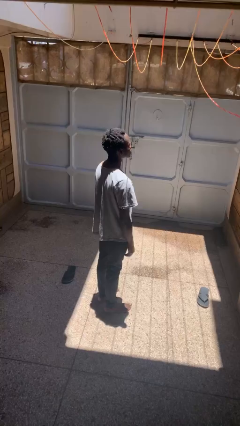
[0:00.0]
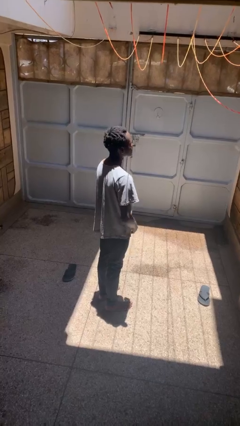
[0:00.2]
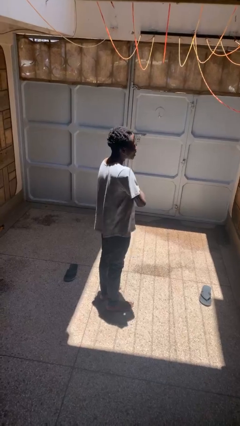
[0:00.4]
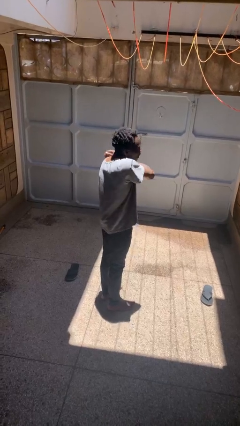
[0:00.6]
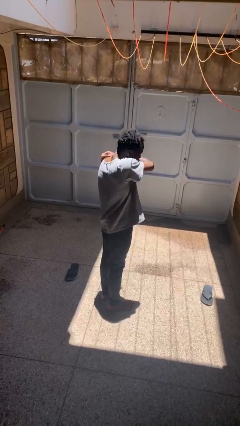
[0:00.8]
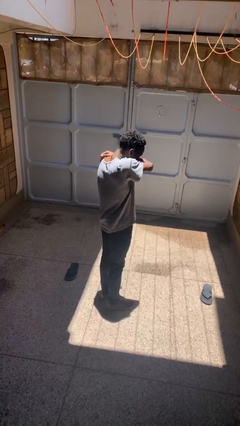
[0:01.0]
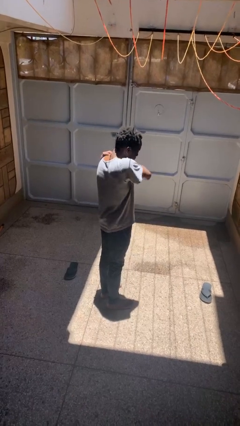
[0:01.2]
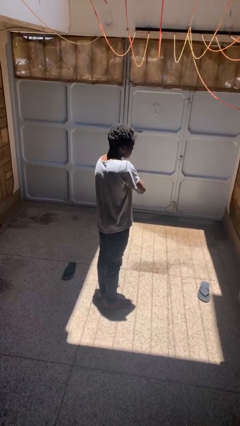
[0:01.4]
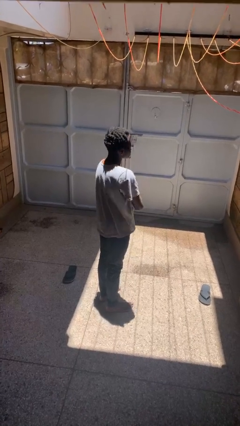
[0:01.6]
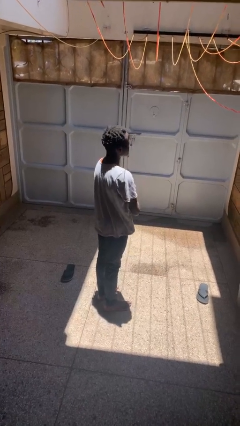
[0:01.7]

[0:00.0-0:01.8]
person sneezes into arm

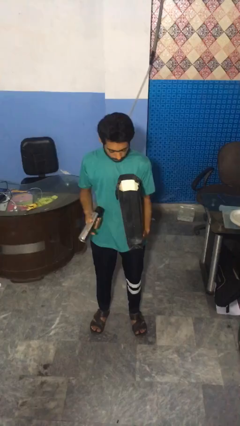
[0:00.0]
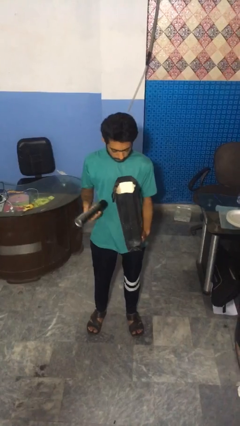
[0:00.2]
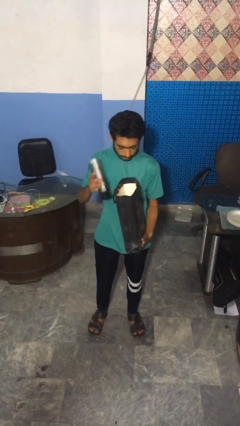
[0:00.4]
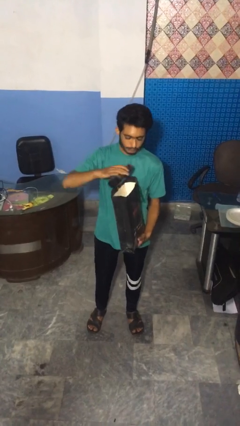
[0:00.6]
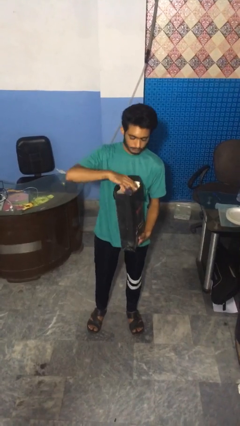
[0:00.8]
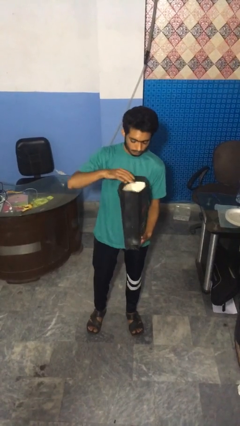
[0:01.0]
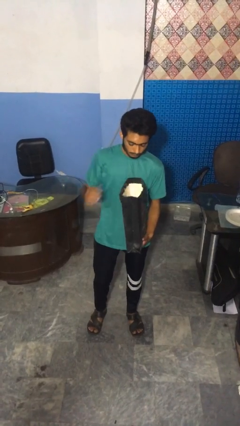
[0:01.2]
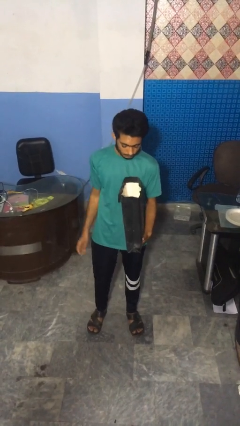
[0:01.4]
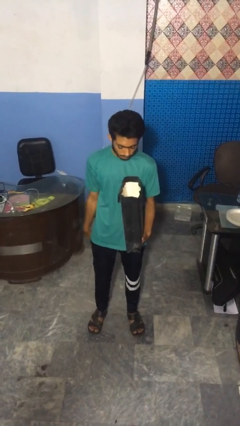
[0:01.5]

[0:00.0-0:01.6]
person puts object into bag

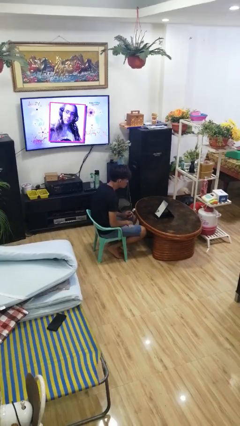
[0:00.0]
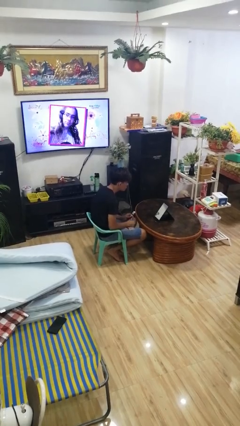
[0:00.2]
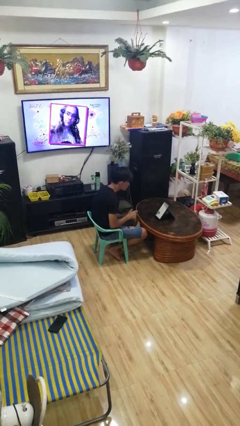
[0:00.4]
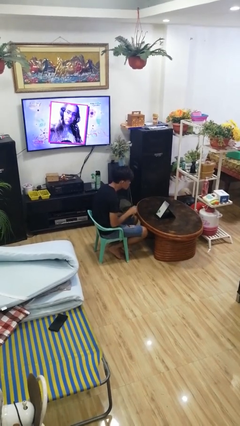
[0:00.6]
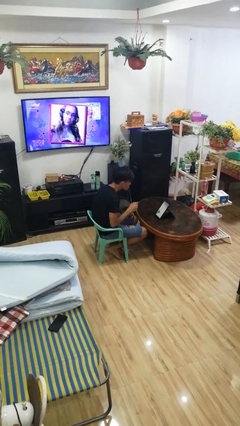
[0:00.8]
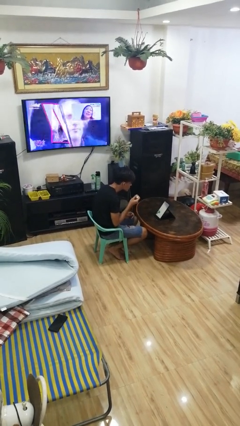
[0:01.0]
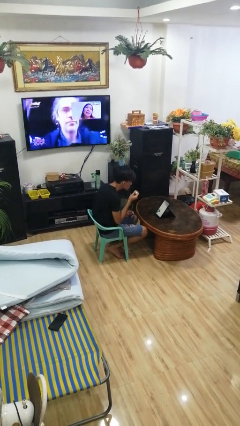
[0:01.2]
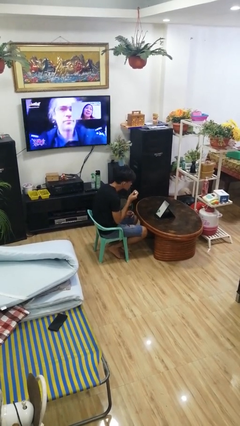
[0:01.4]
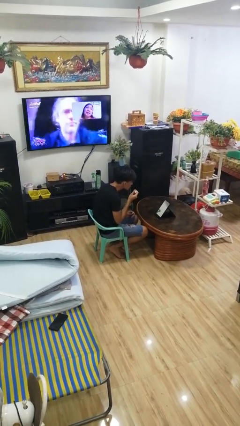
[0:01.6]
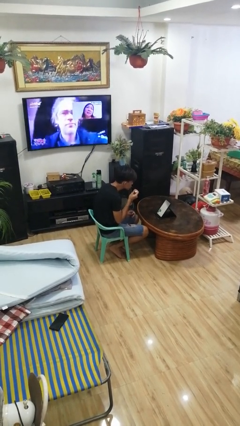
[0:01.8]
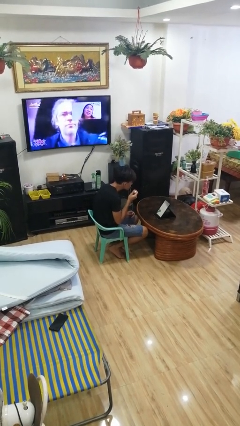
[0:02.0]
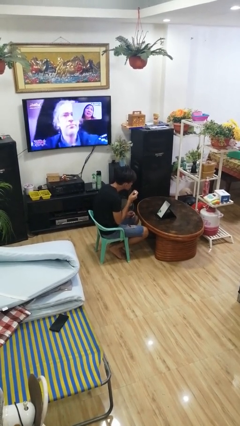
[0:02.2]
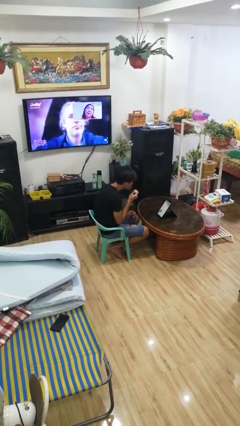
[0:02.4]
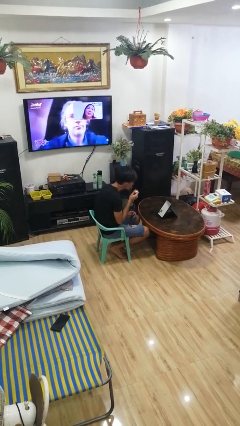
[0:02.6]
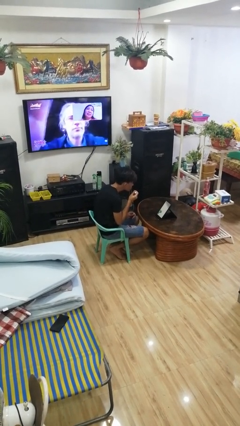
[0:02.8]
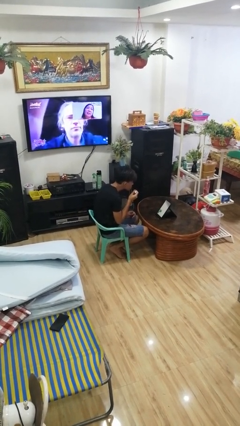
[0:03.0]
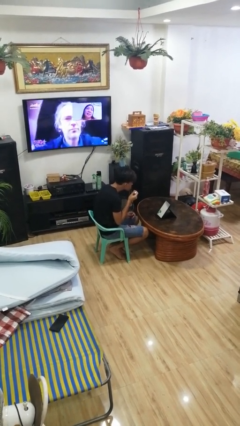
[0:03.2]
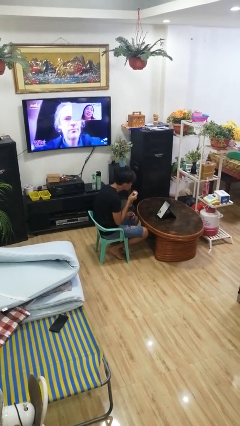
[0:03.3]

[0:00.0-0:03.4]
person applies lip makeup

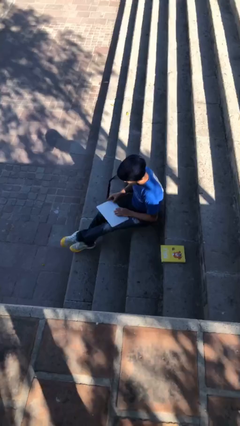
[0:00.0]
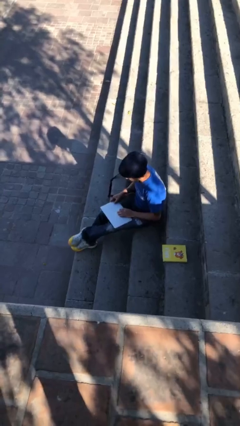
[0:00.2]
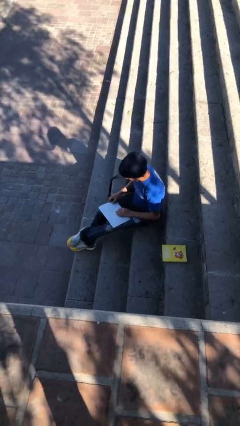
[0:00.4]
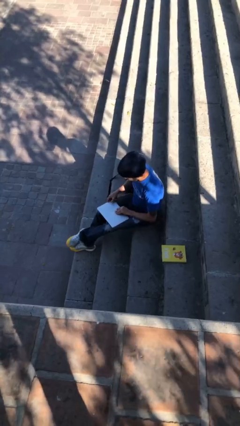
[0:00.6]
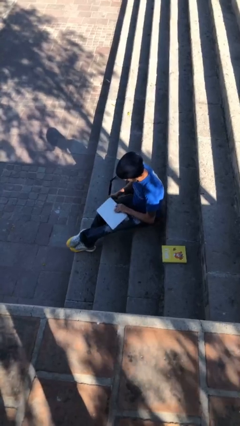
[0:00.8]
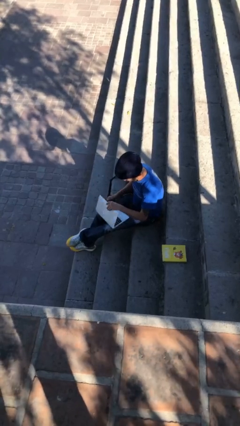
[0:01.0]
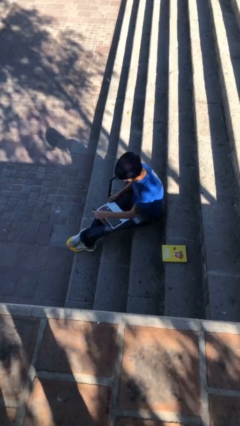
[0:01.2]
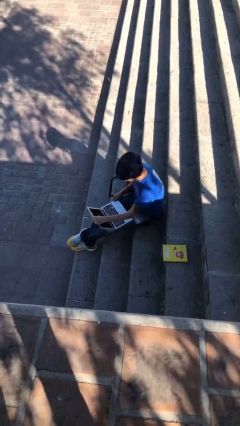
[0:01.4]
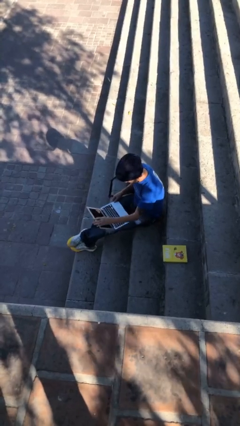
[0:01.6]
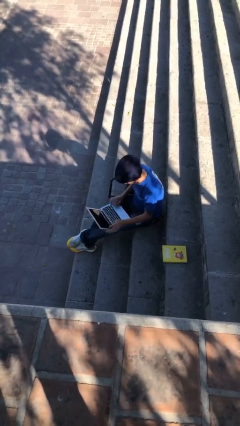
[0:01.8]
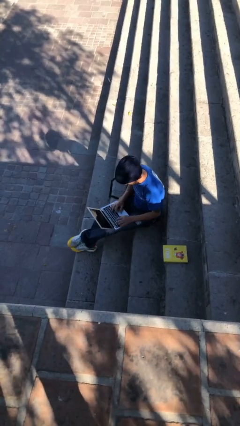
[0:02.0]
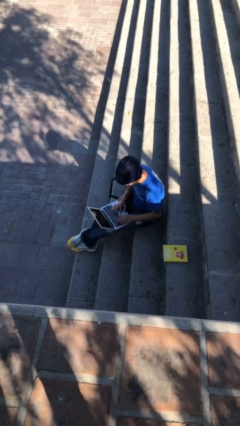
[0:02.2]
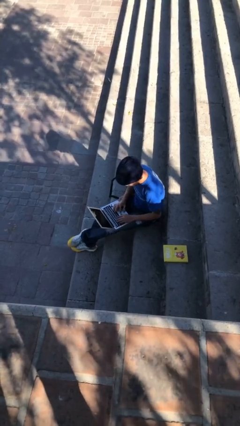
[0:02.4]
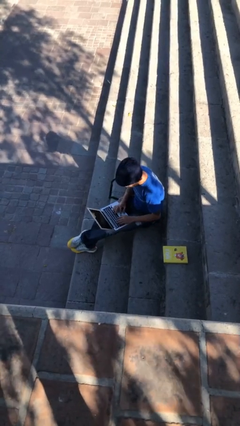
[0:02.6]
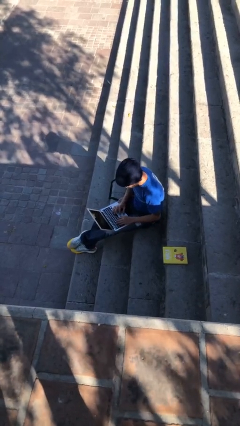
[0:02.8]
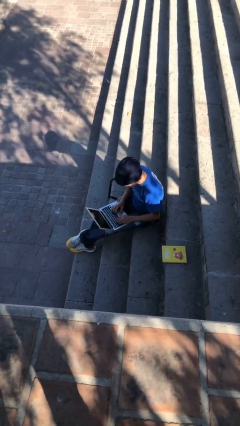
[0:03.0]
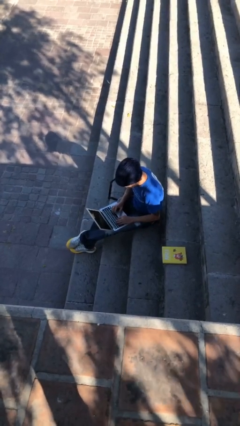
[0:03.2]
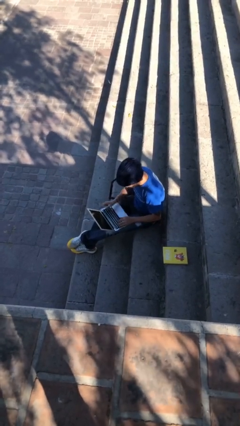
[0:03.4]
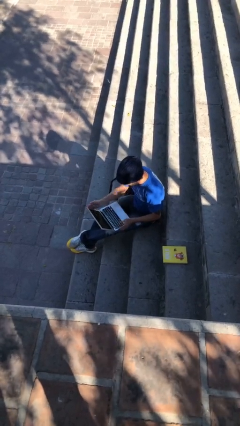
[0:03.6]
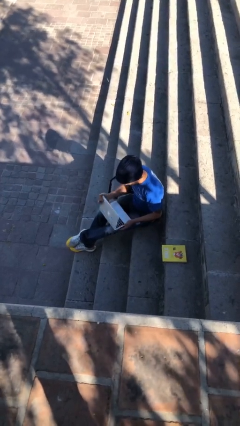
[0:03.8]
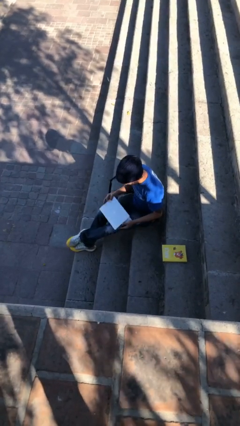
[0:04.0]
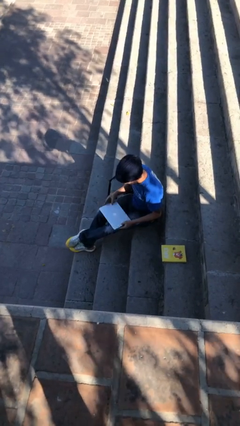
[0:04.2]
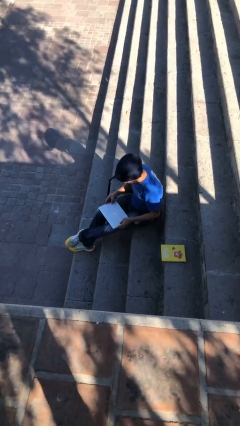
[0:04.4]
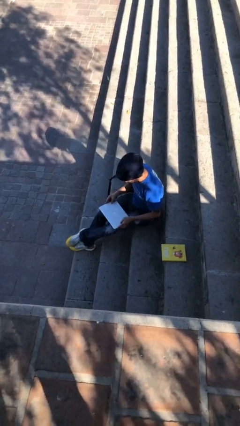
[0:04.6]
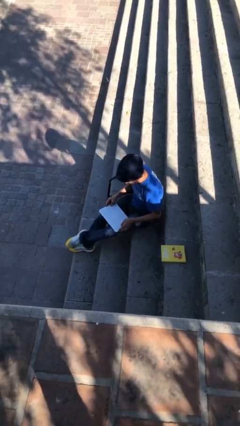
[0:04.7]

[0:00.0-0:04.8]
person interacts with laptop

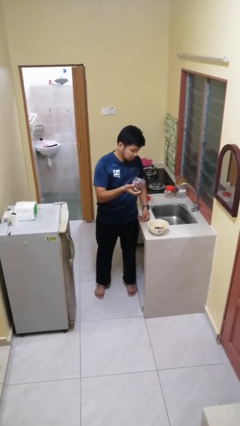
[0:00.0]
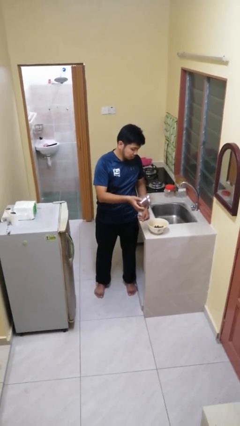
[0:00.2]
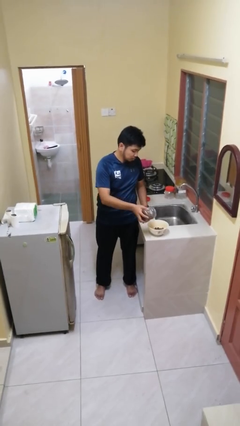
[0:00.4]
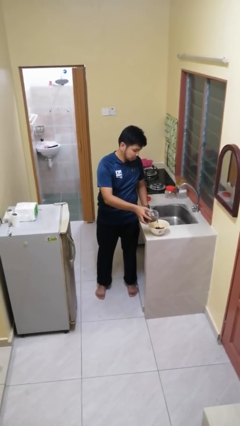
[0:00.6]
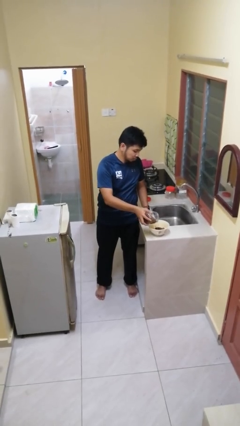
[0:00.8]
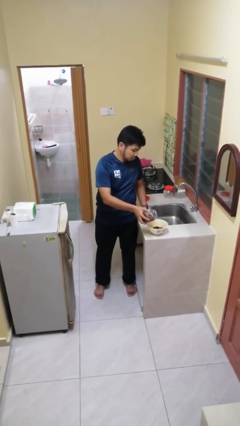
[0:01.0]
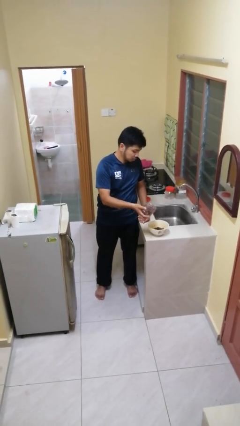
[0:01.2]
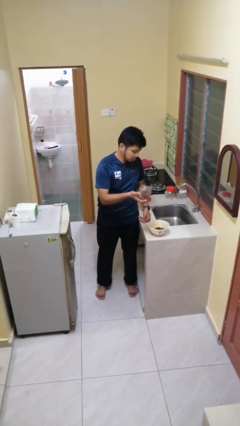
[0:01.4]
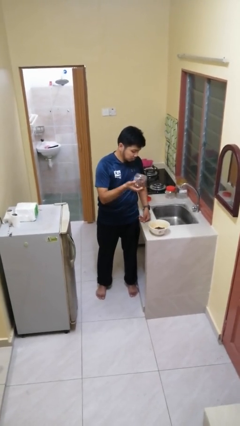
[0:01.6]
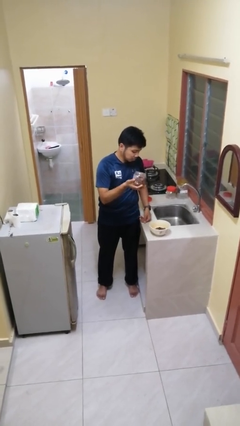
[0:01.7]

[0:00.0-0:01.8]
person pours into bowl

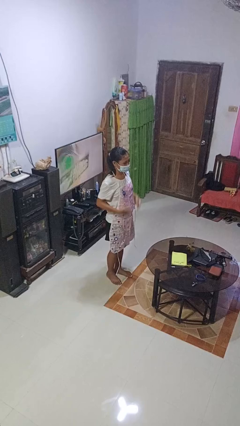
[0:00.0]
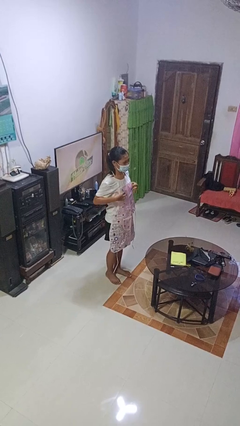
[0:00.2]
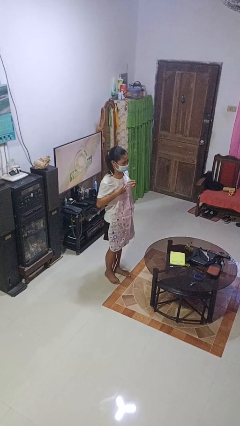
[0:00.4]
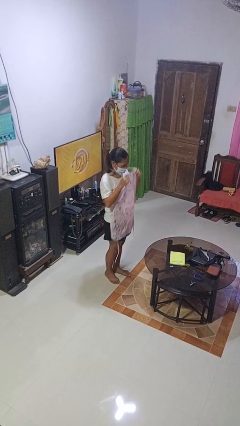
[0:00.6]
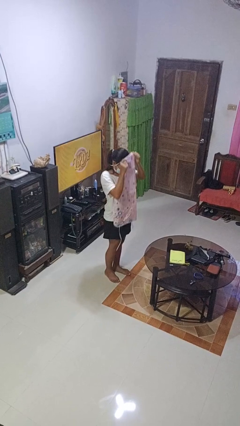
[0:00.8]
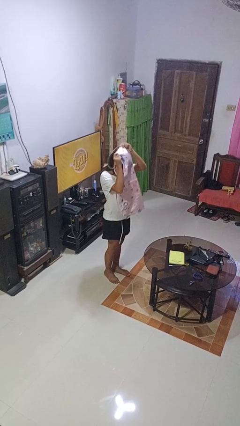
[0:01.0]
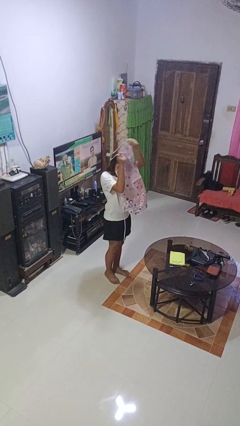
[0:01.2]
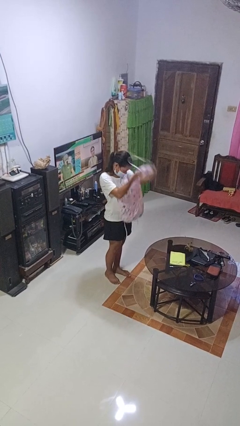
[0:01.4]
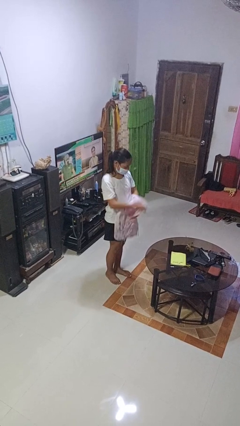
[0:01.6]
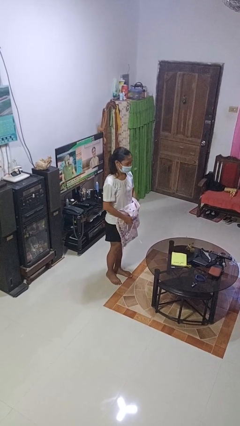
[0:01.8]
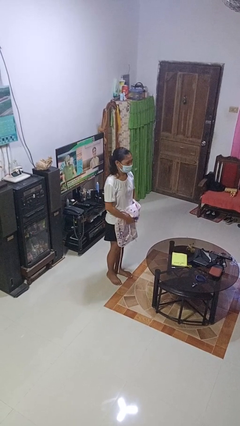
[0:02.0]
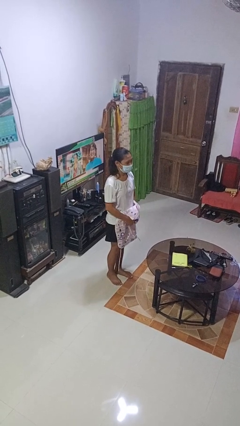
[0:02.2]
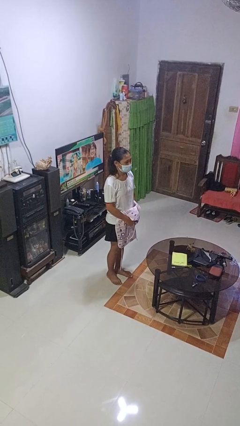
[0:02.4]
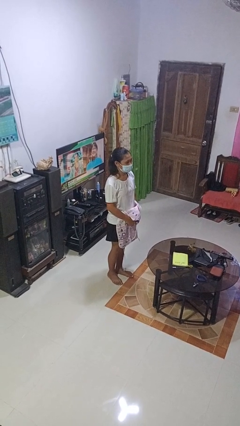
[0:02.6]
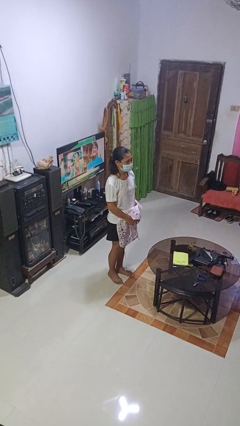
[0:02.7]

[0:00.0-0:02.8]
person takes off apron

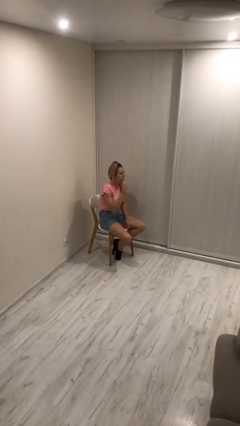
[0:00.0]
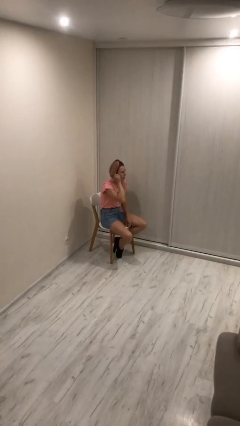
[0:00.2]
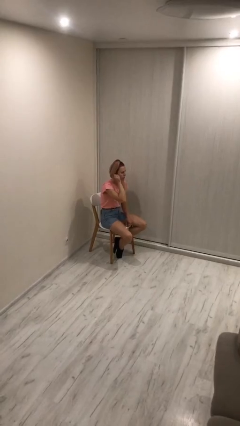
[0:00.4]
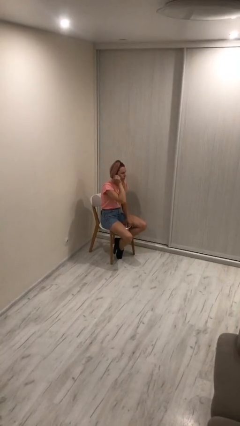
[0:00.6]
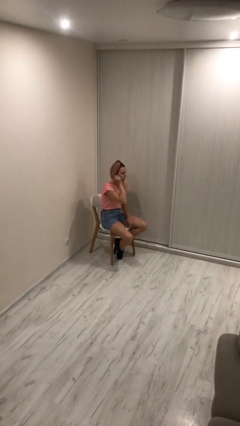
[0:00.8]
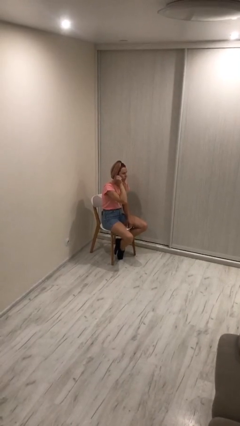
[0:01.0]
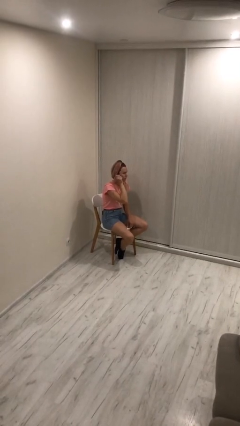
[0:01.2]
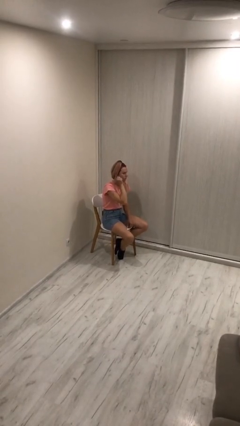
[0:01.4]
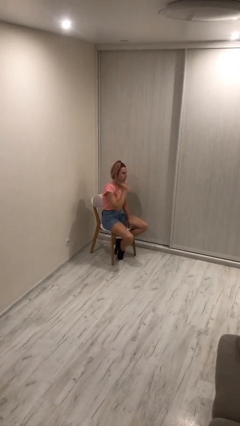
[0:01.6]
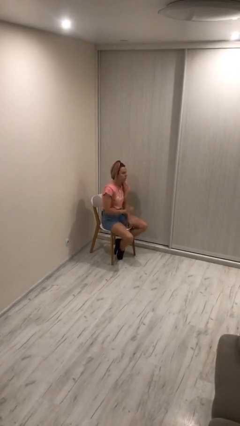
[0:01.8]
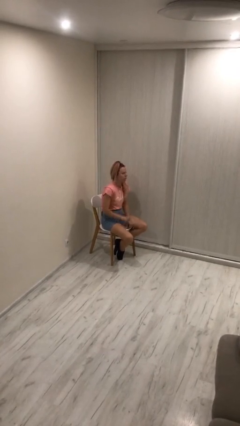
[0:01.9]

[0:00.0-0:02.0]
person touches earlobe
